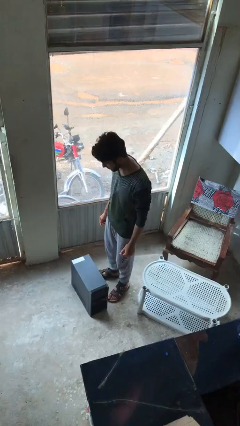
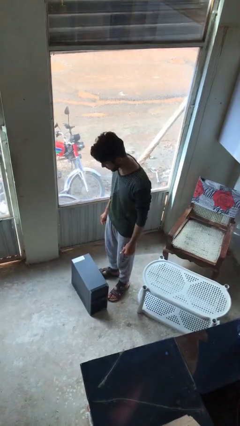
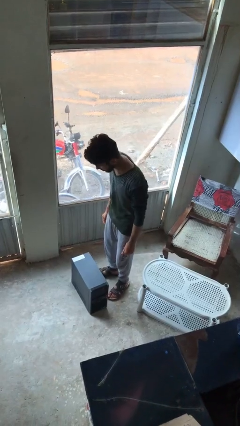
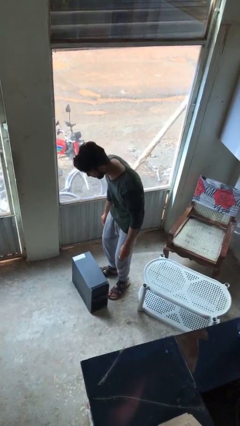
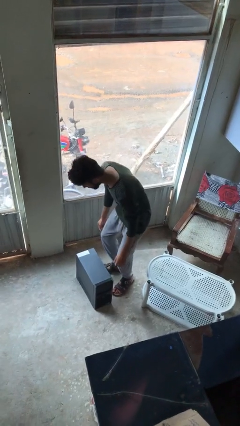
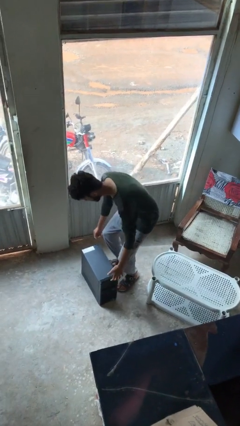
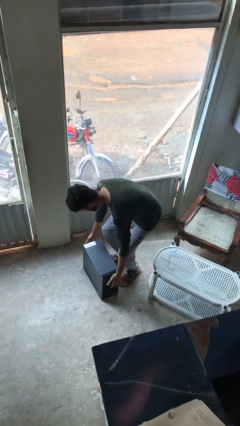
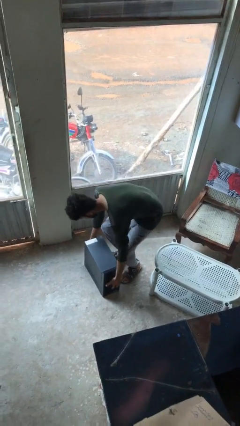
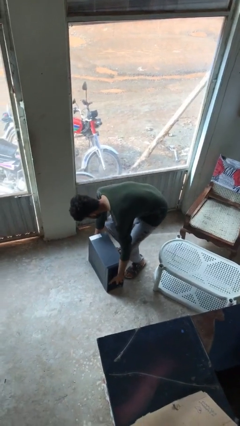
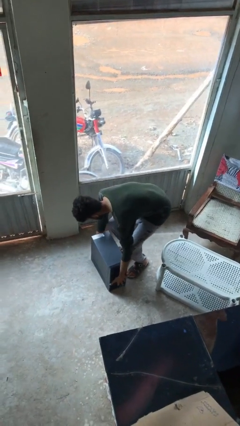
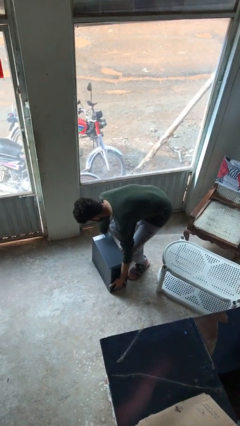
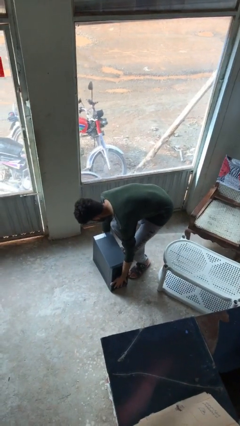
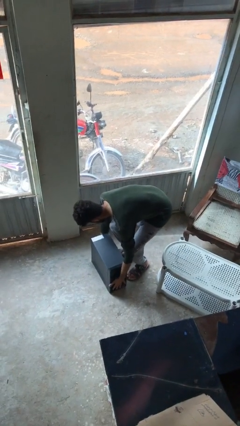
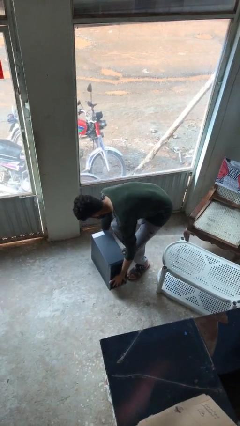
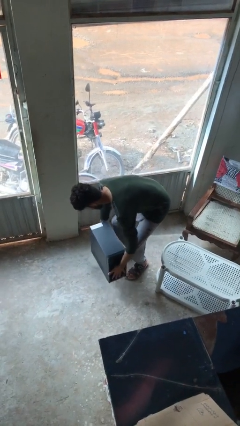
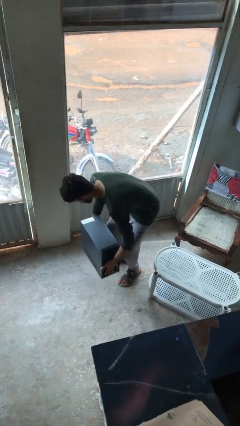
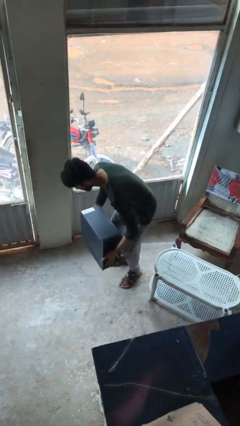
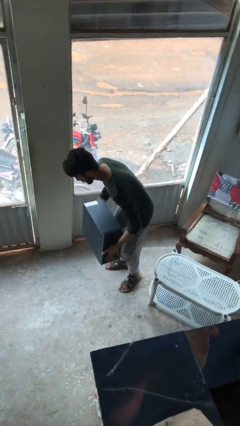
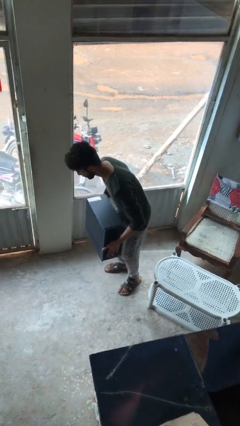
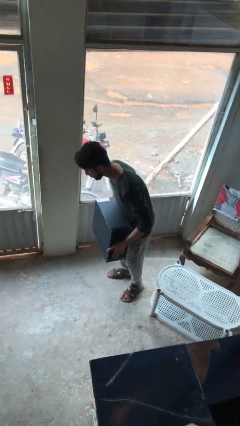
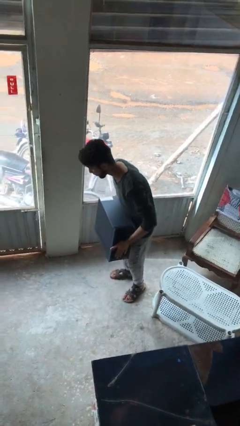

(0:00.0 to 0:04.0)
person picks up object from floor

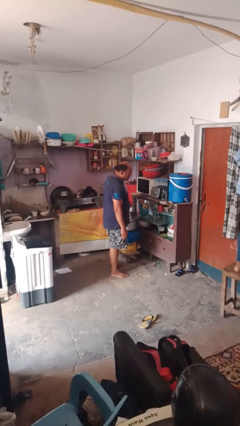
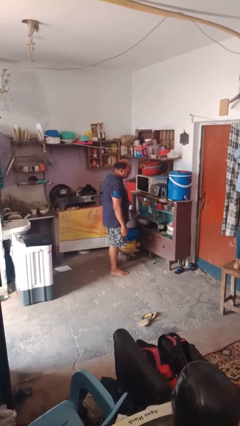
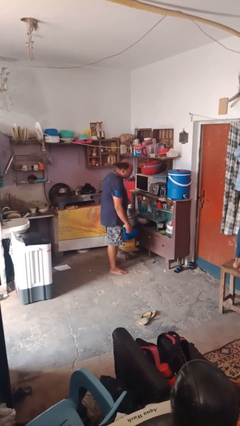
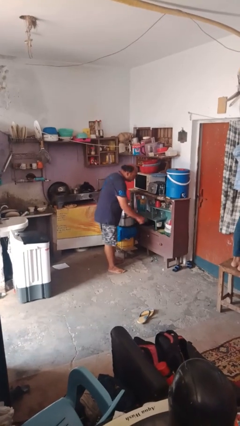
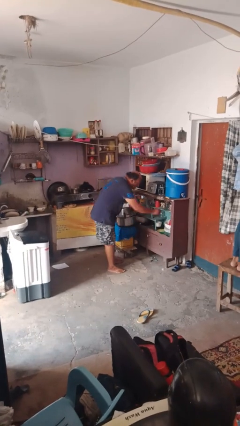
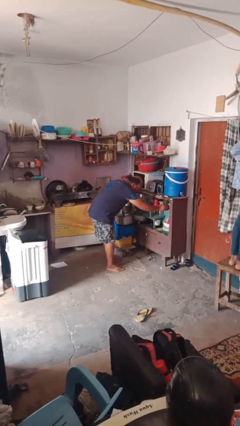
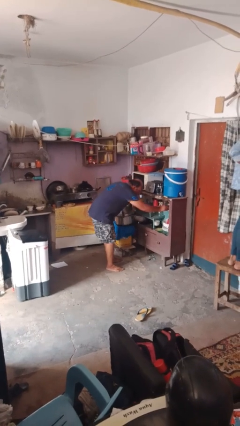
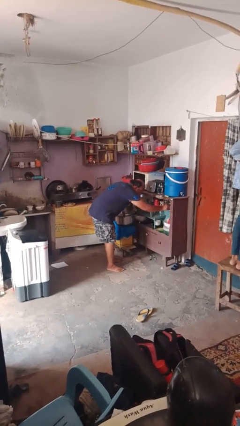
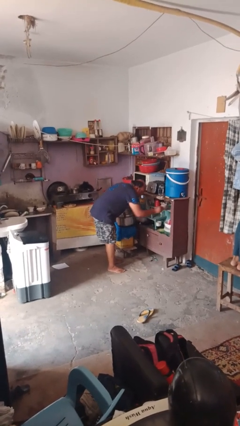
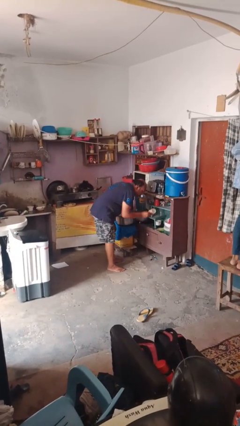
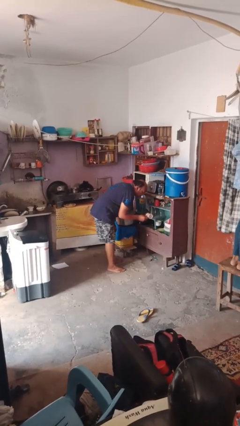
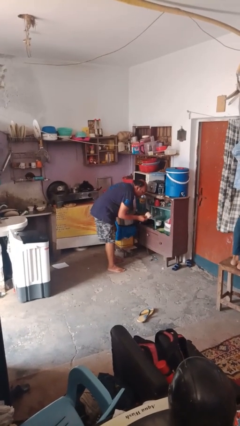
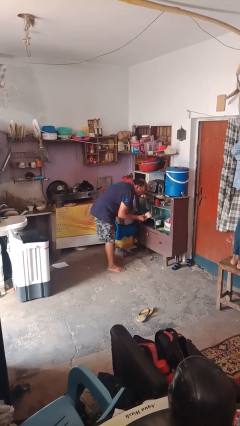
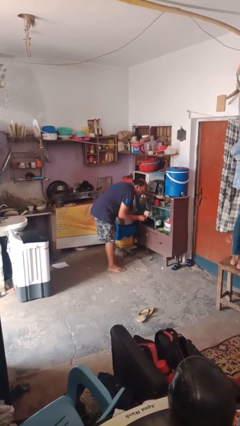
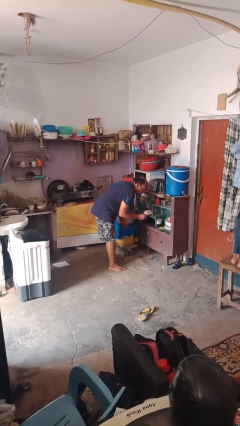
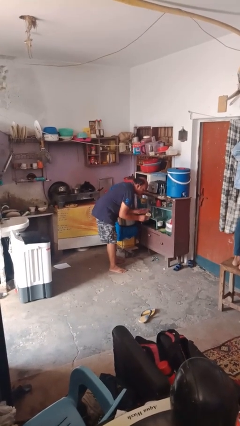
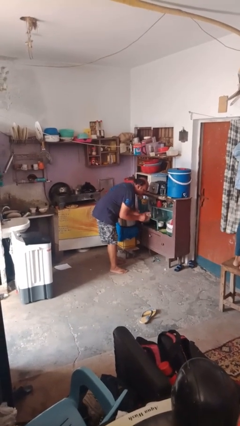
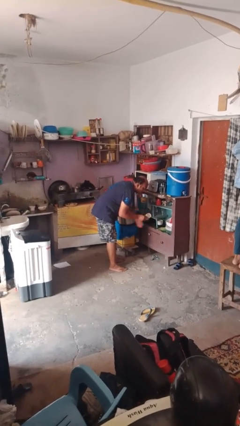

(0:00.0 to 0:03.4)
person takes object from kitchen drawer

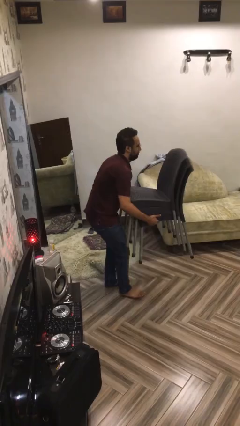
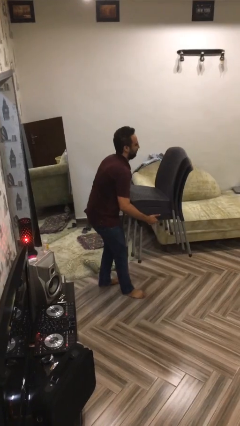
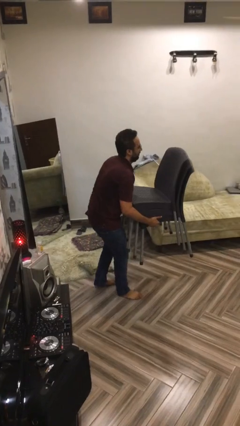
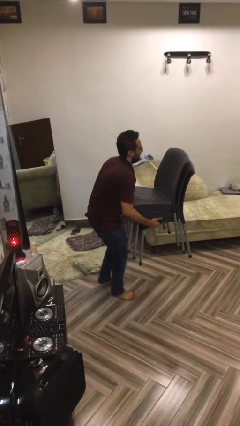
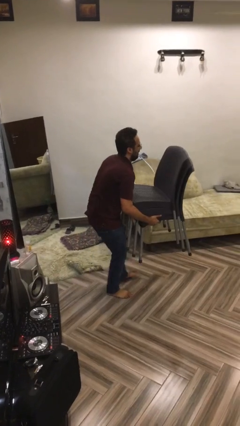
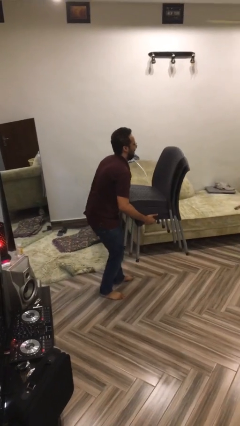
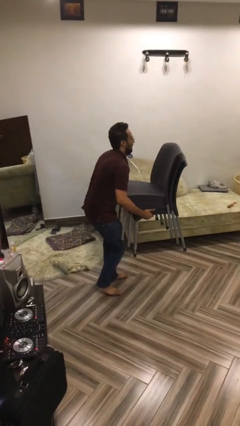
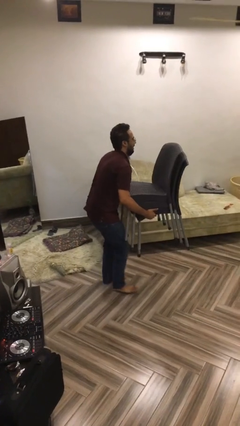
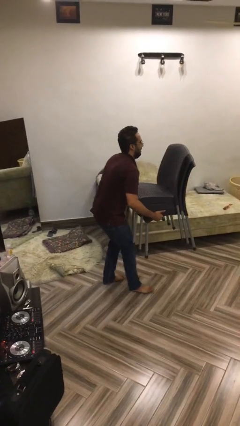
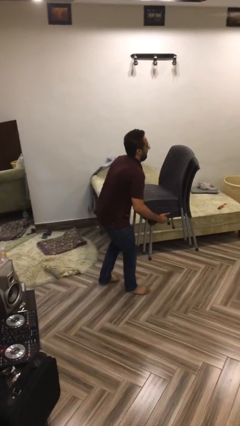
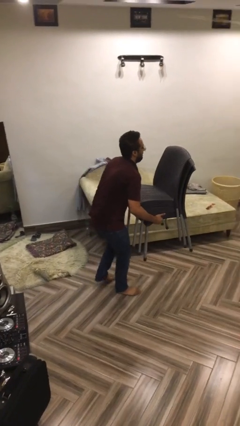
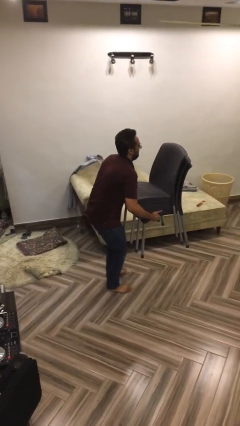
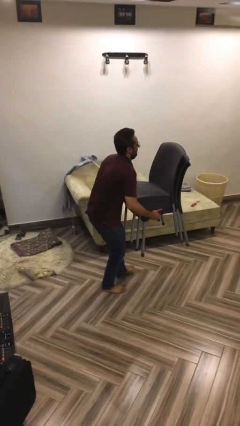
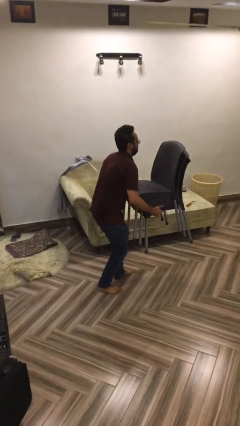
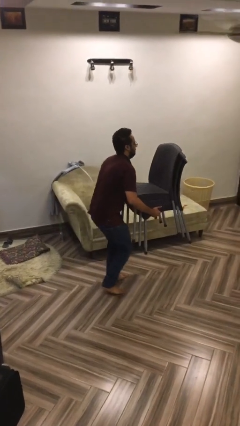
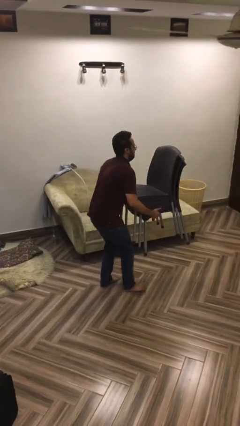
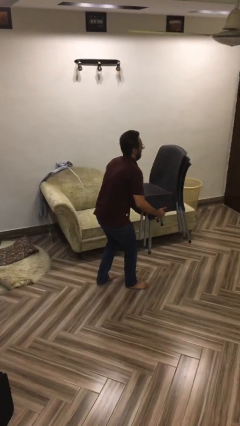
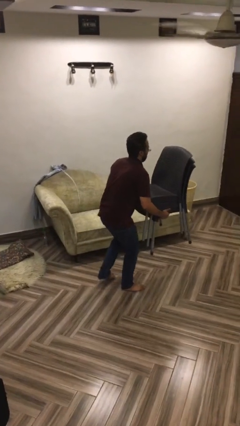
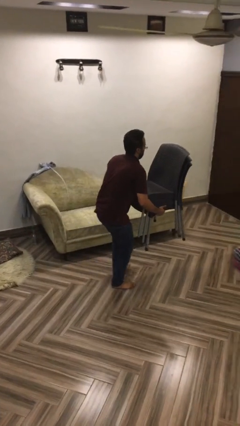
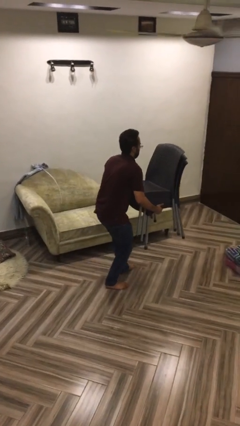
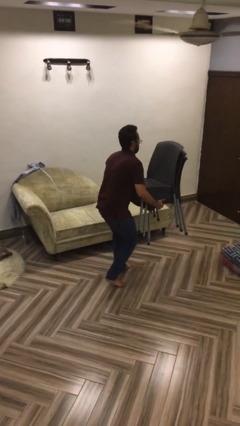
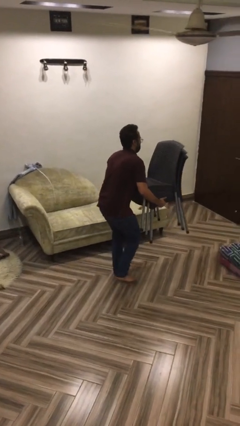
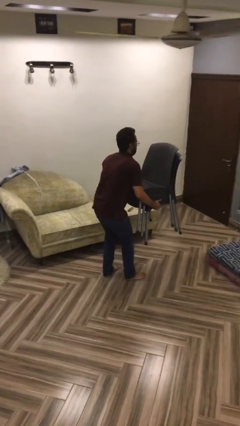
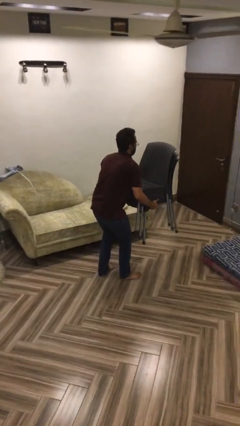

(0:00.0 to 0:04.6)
person carries heavy object

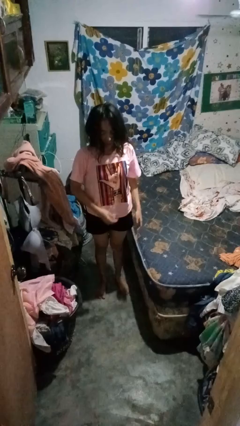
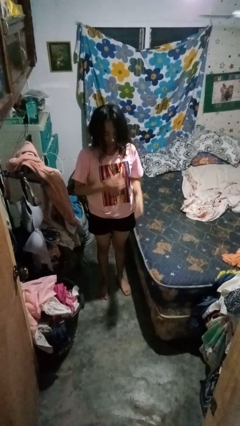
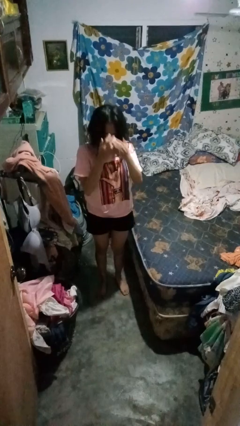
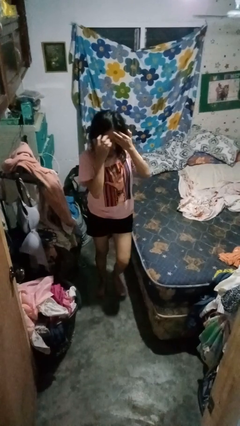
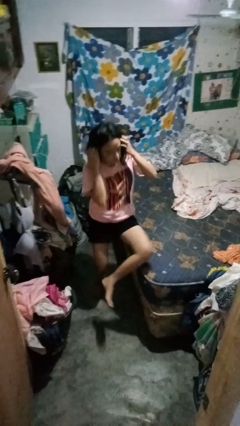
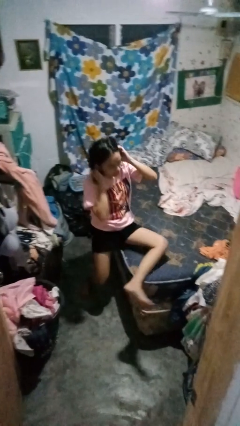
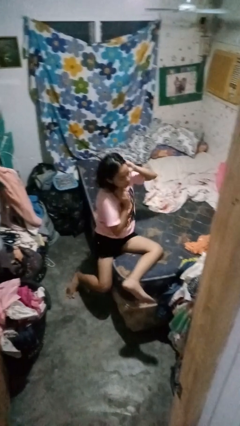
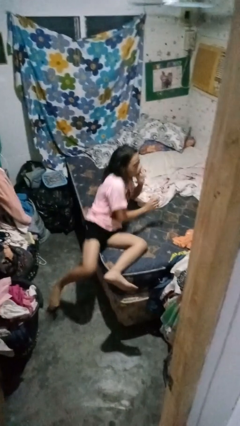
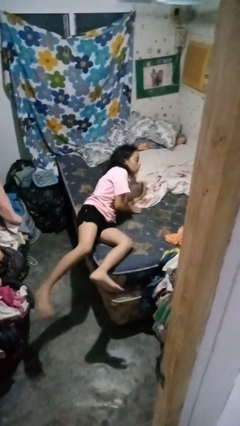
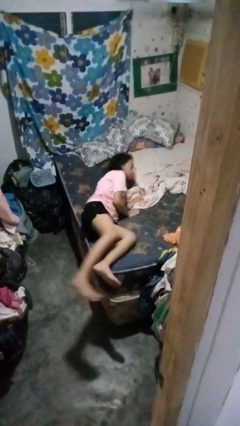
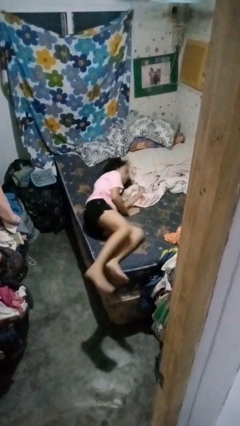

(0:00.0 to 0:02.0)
person lies down on bed

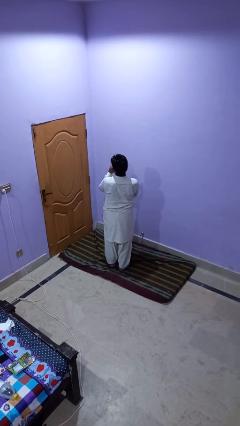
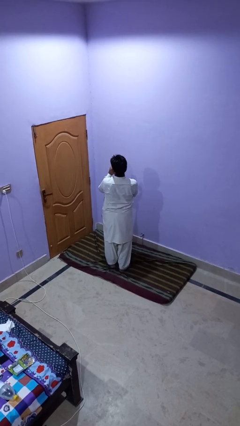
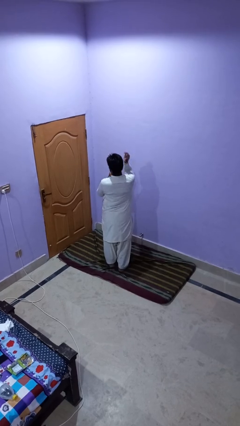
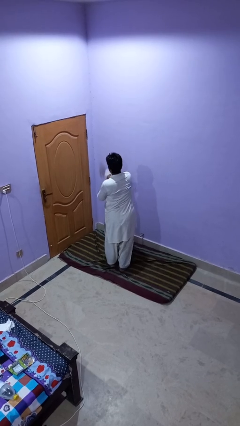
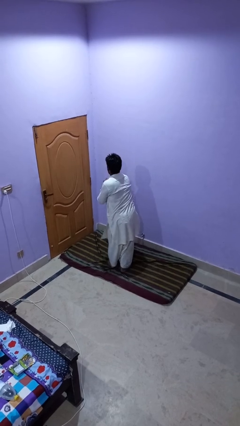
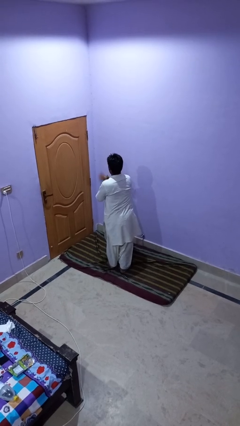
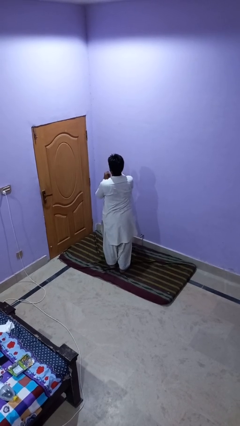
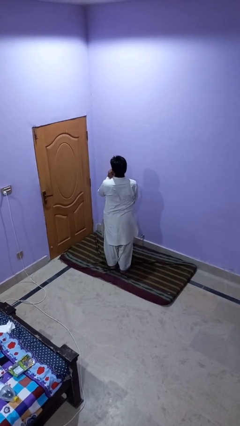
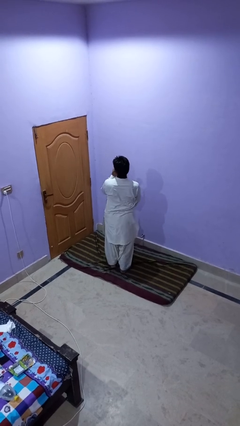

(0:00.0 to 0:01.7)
person karate chop

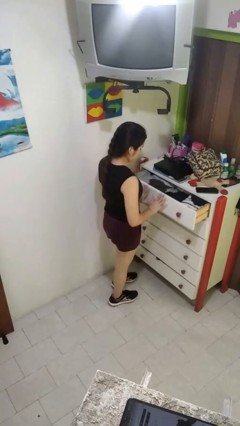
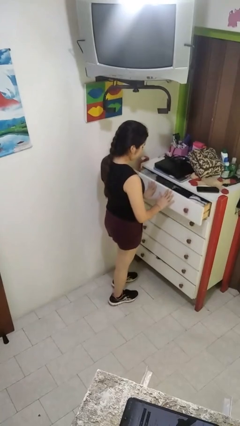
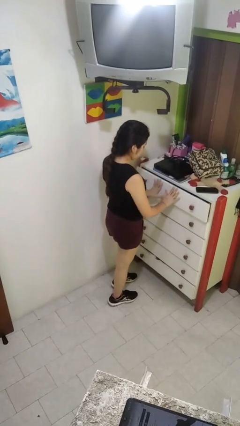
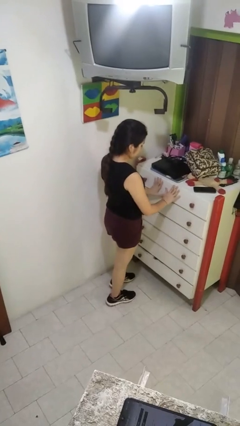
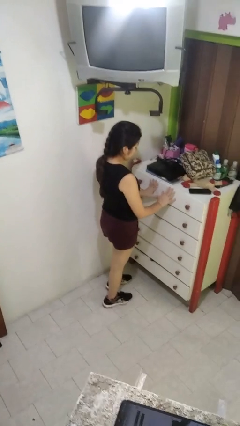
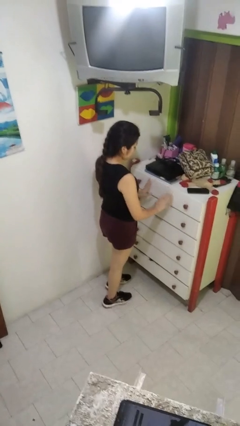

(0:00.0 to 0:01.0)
person closes dresser drawer

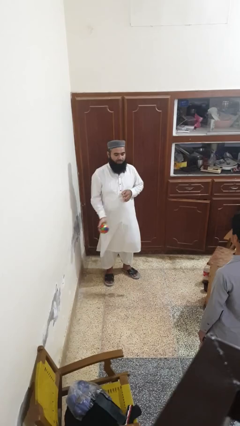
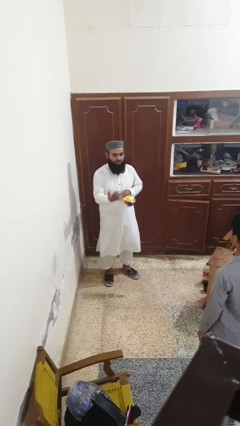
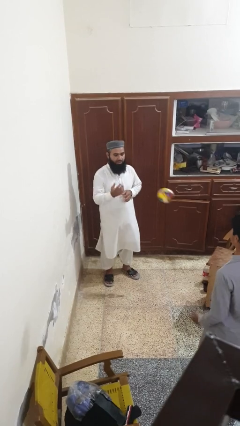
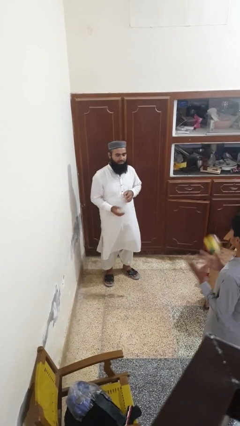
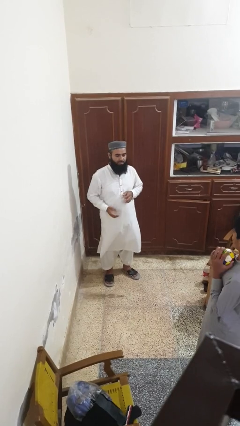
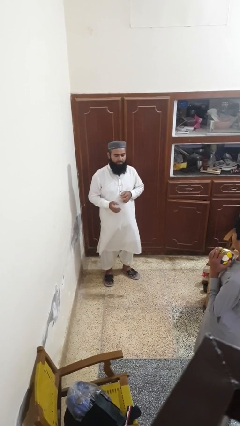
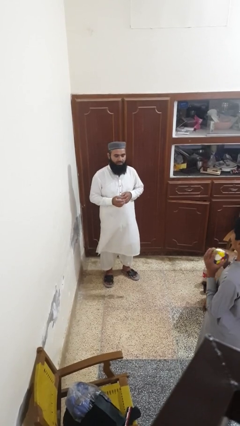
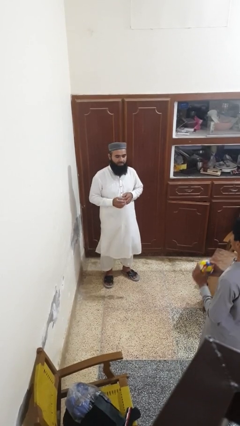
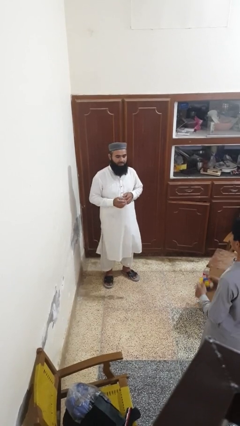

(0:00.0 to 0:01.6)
person throws object to person
